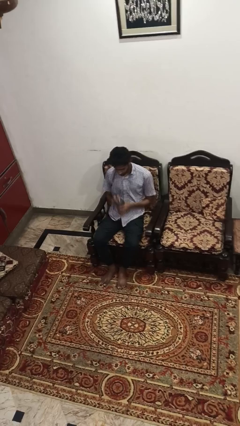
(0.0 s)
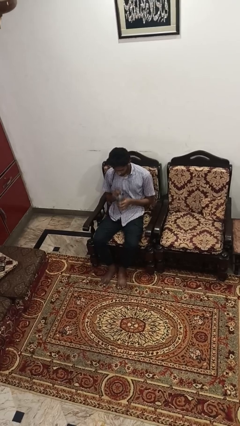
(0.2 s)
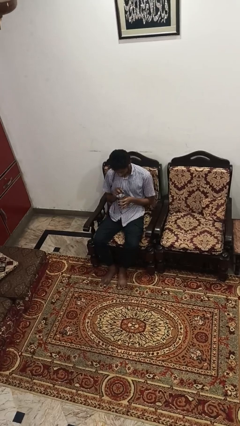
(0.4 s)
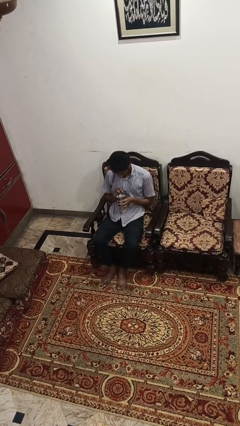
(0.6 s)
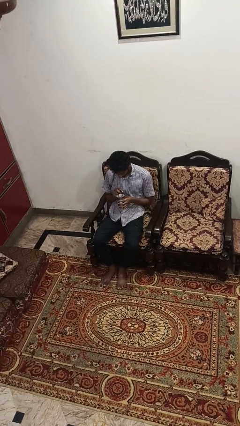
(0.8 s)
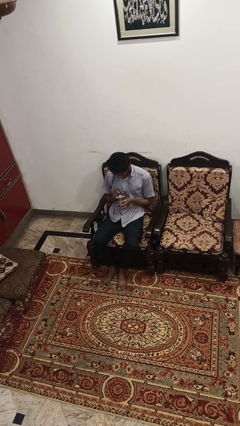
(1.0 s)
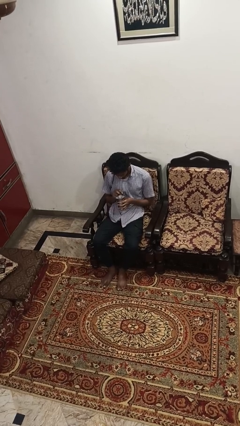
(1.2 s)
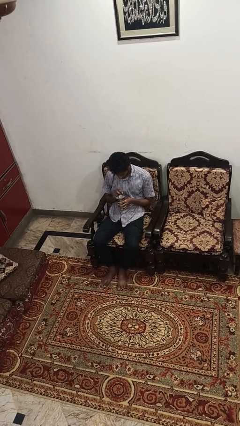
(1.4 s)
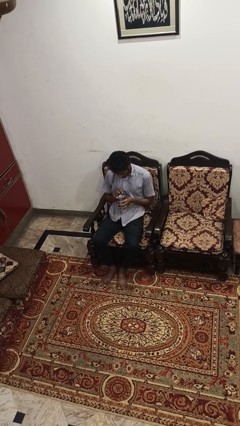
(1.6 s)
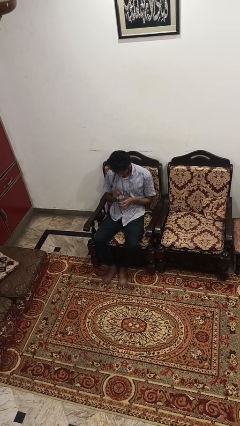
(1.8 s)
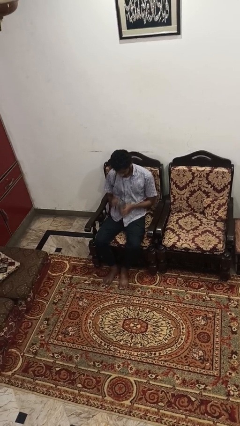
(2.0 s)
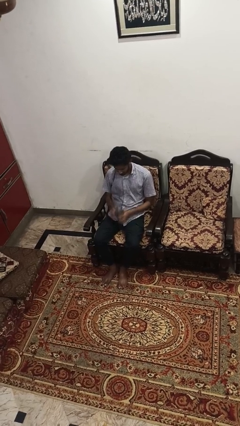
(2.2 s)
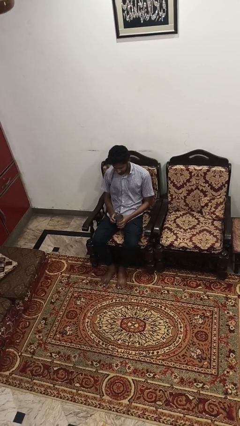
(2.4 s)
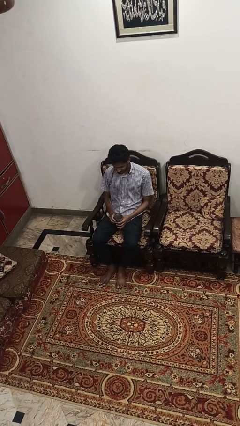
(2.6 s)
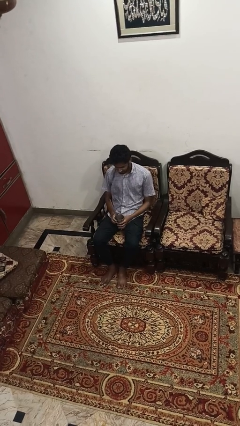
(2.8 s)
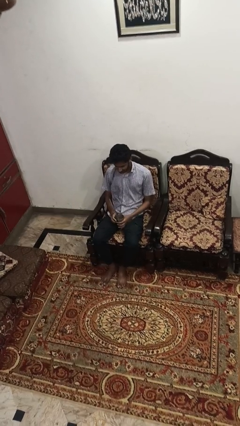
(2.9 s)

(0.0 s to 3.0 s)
person drinks from straw

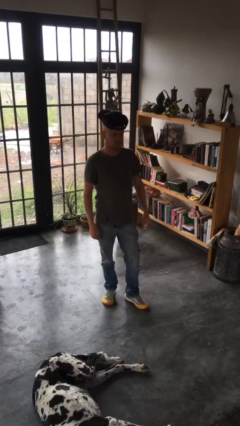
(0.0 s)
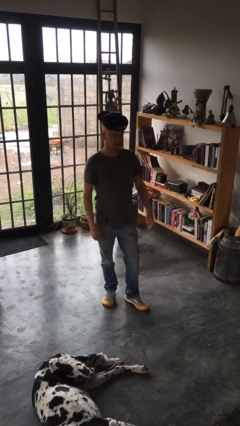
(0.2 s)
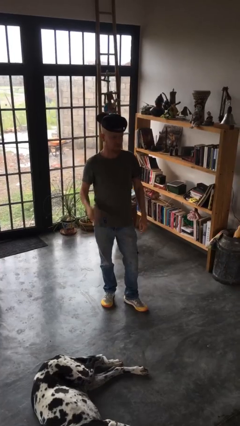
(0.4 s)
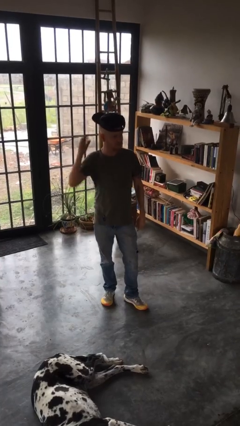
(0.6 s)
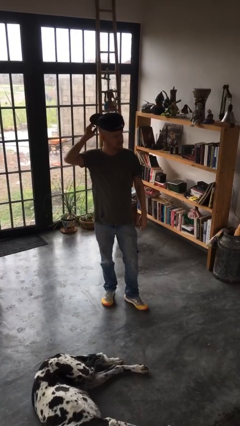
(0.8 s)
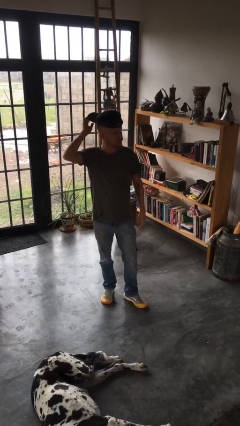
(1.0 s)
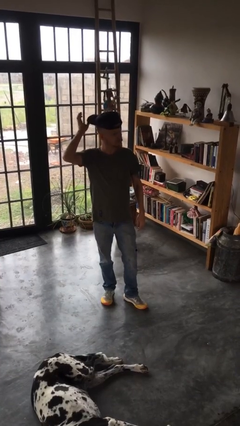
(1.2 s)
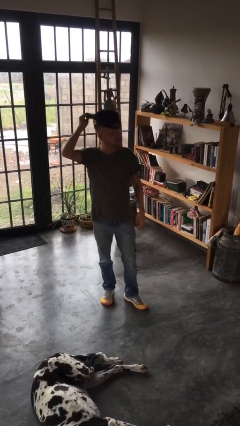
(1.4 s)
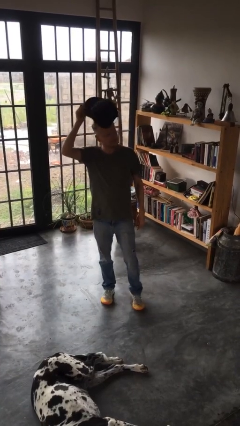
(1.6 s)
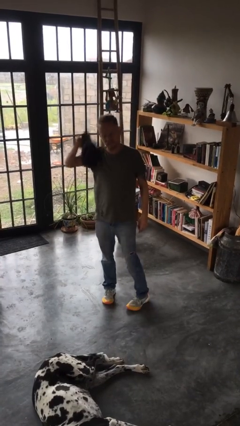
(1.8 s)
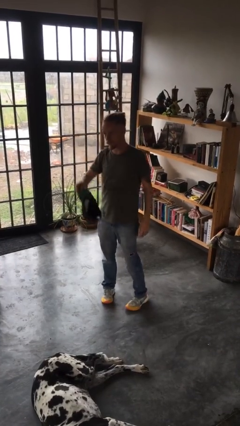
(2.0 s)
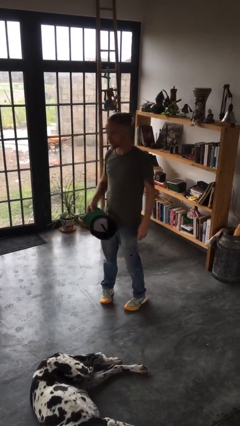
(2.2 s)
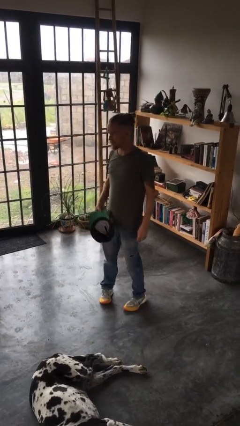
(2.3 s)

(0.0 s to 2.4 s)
person takes off hat

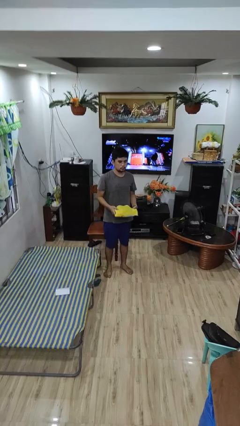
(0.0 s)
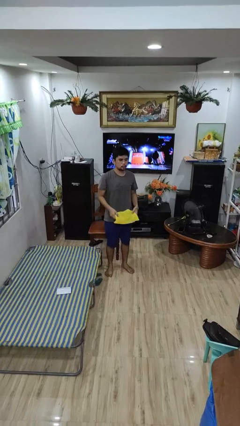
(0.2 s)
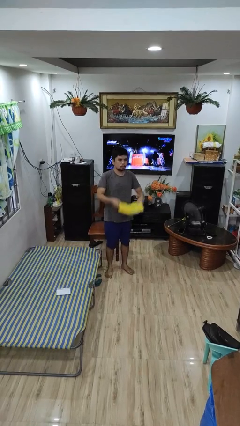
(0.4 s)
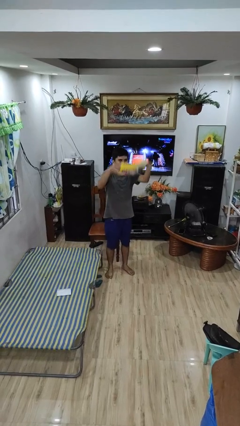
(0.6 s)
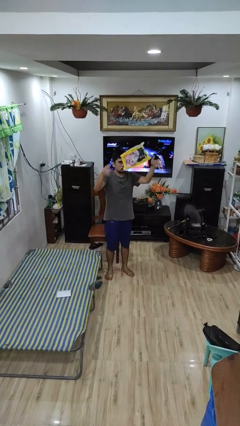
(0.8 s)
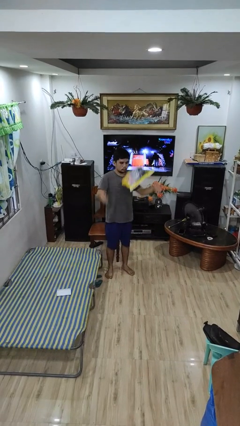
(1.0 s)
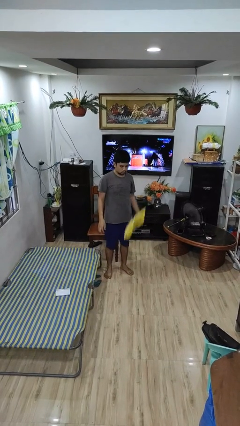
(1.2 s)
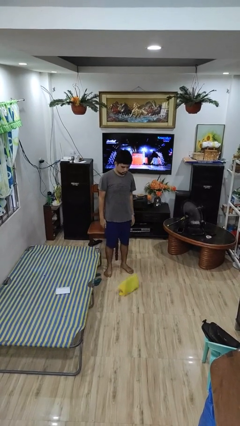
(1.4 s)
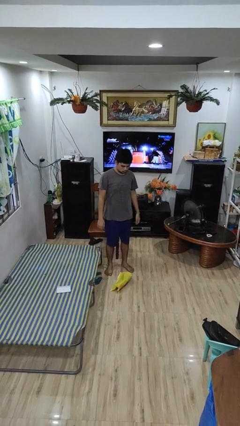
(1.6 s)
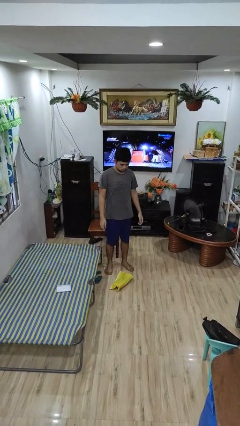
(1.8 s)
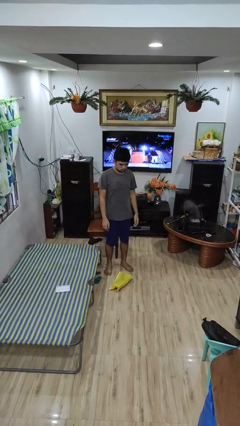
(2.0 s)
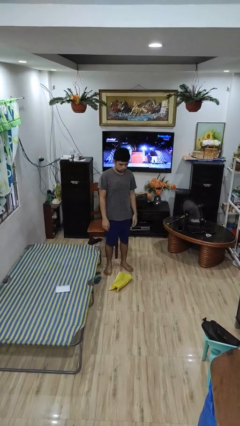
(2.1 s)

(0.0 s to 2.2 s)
person throws object into air

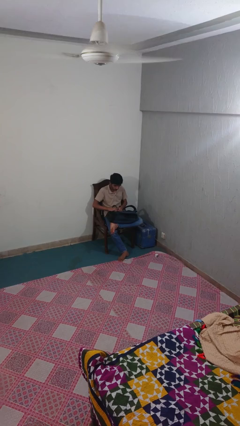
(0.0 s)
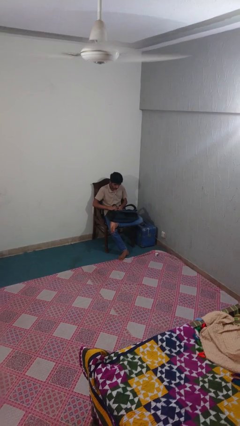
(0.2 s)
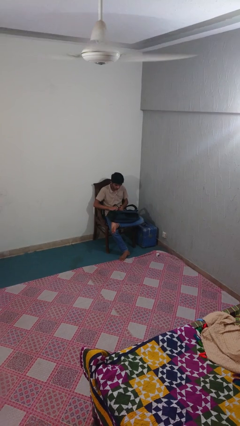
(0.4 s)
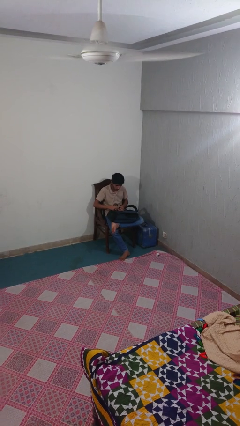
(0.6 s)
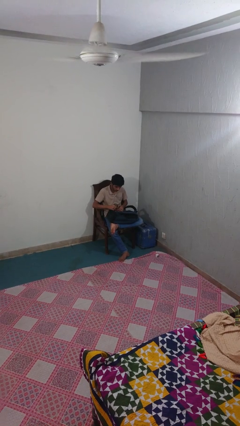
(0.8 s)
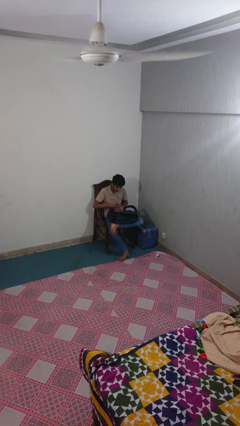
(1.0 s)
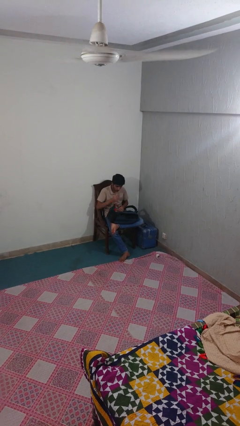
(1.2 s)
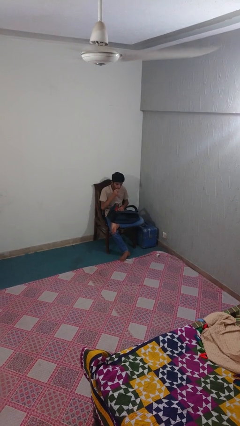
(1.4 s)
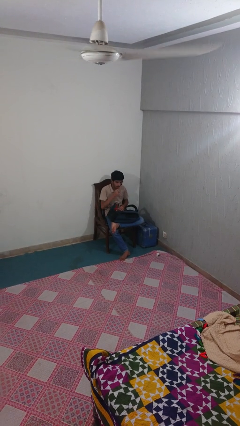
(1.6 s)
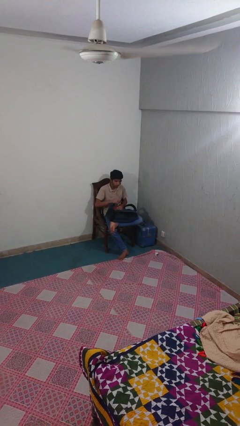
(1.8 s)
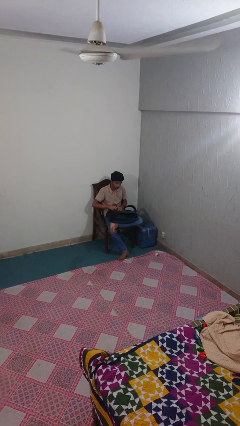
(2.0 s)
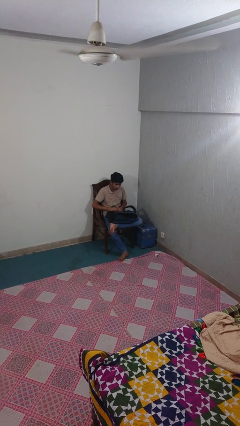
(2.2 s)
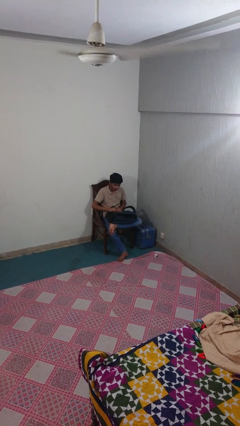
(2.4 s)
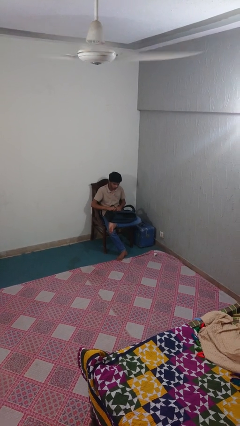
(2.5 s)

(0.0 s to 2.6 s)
person eats snack from bag

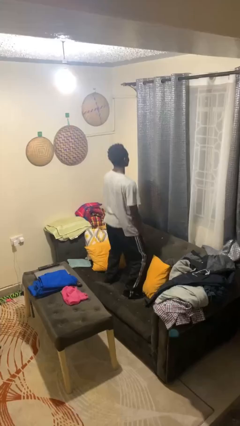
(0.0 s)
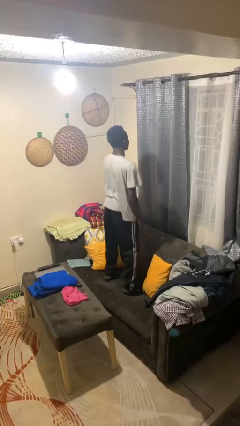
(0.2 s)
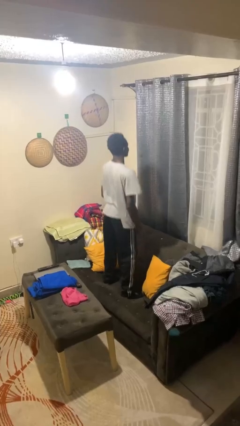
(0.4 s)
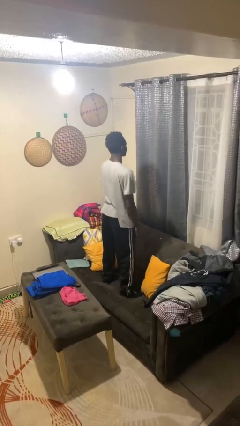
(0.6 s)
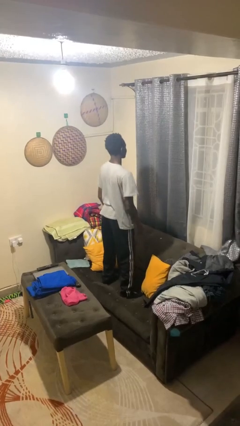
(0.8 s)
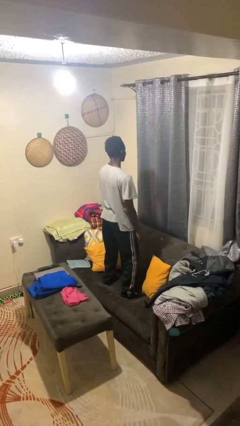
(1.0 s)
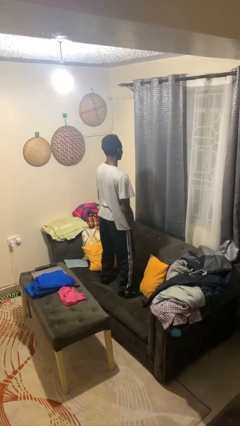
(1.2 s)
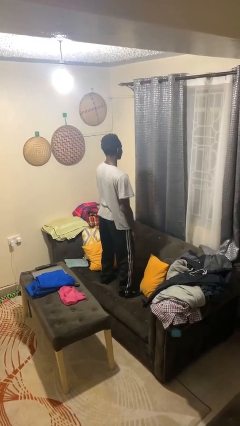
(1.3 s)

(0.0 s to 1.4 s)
person jumps on couch

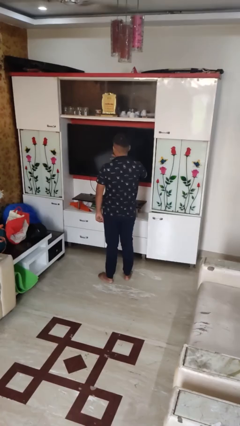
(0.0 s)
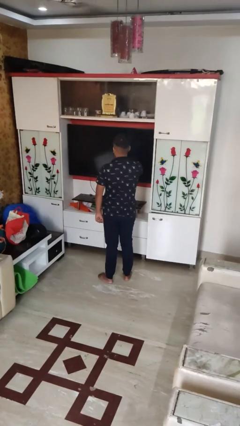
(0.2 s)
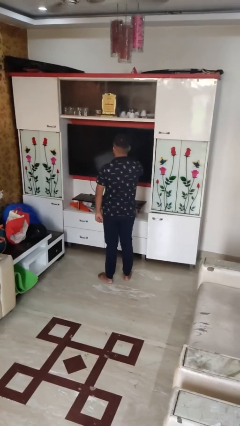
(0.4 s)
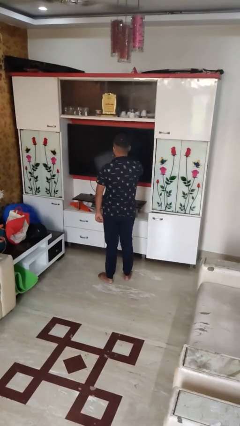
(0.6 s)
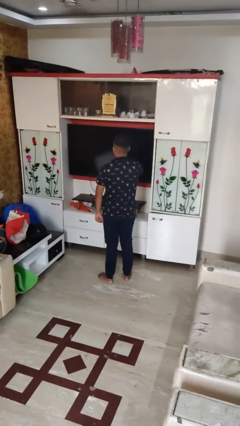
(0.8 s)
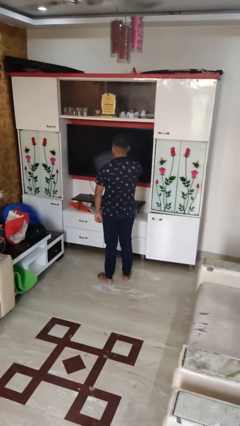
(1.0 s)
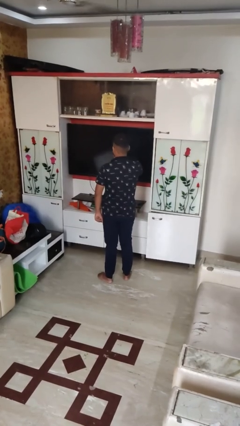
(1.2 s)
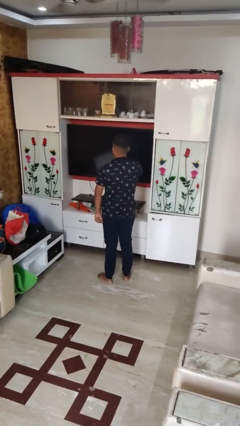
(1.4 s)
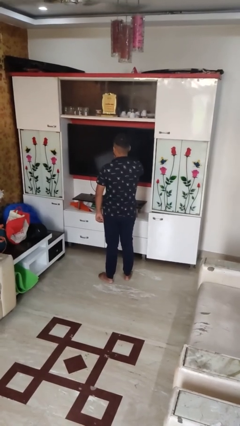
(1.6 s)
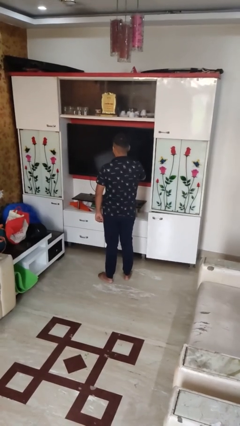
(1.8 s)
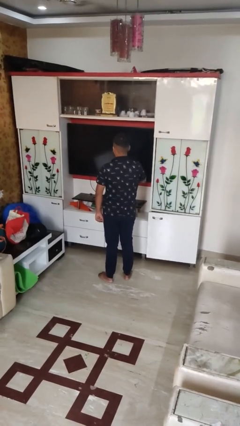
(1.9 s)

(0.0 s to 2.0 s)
person strokes chin

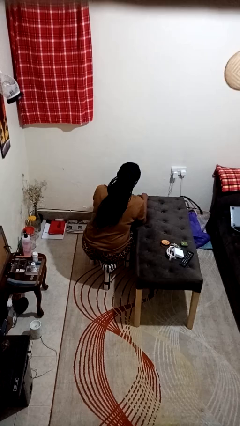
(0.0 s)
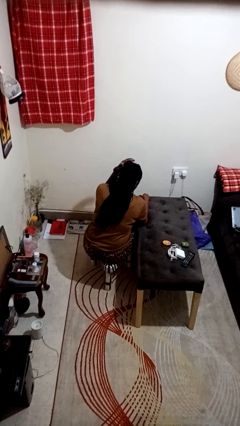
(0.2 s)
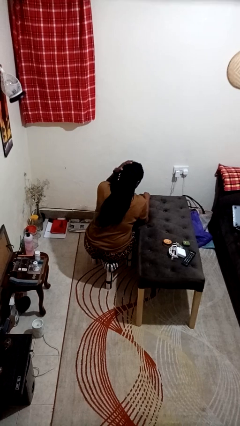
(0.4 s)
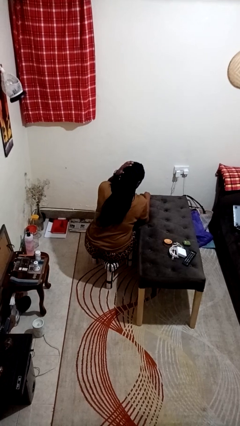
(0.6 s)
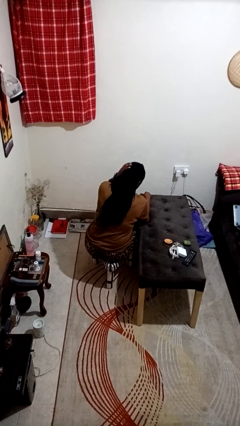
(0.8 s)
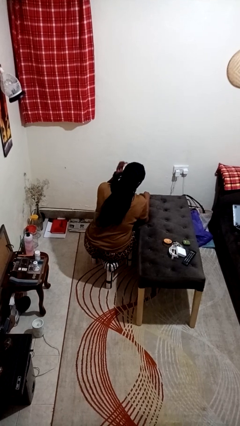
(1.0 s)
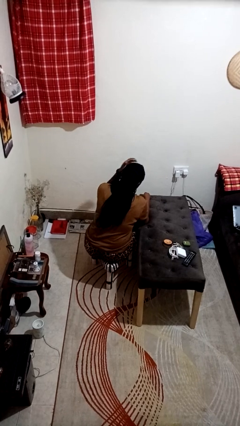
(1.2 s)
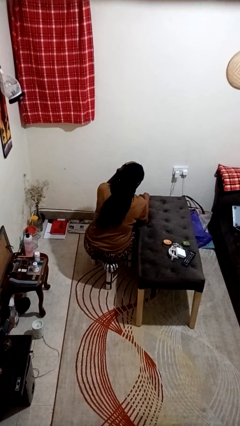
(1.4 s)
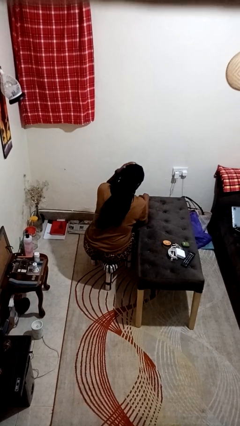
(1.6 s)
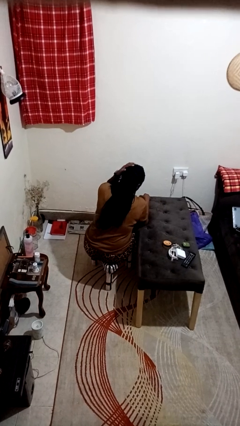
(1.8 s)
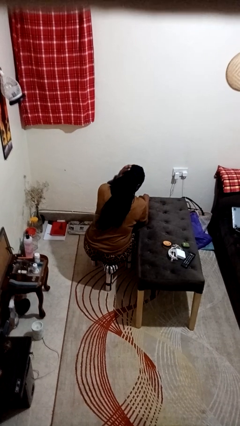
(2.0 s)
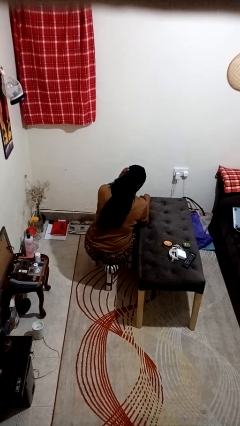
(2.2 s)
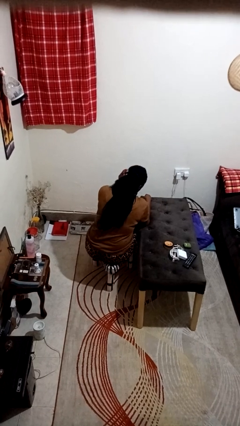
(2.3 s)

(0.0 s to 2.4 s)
person strokes hair

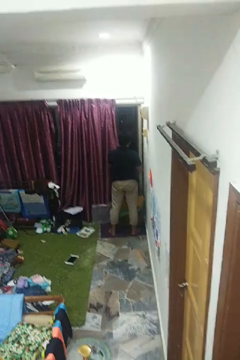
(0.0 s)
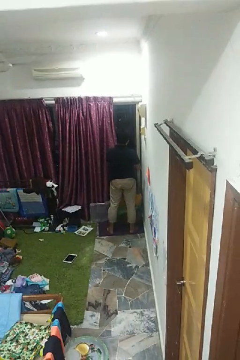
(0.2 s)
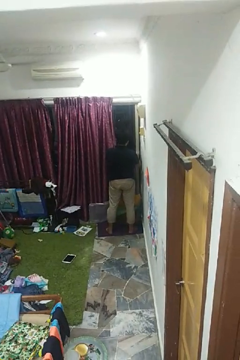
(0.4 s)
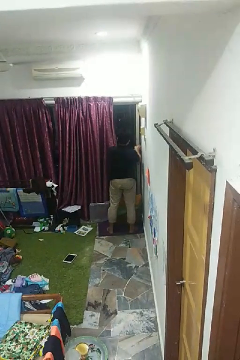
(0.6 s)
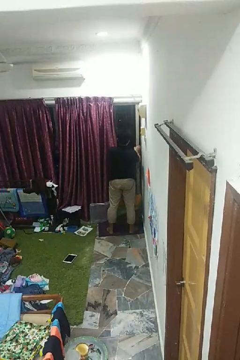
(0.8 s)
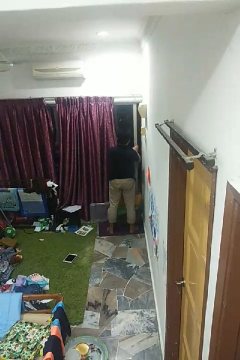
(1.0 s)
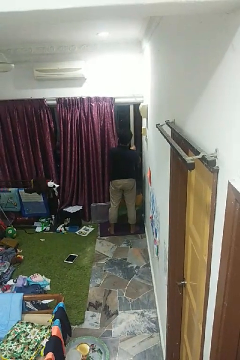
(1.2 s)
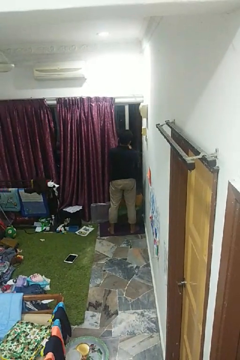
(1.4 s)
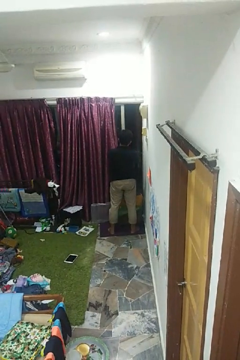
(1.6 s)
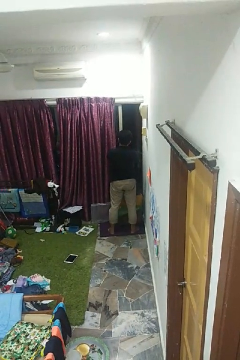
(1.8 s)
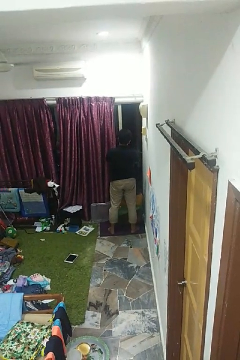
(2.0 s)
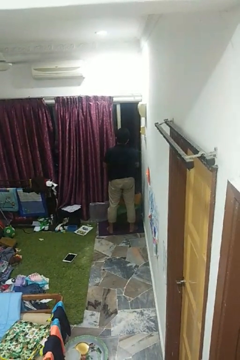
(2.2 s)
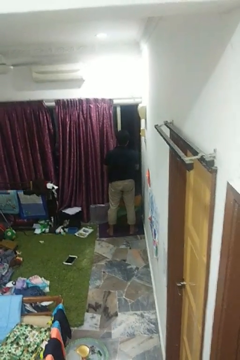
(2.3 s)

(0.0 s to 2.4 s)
person opens home window
